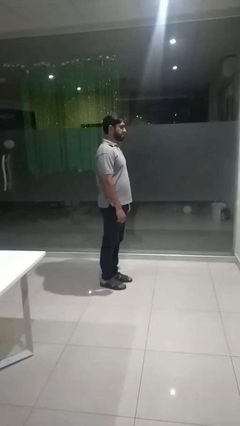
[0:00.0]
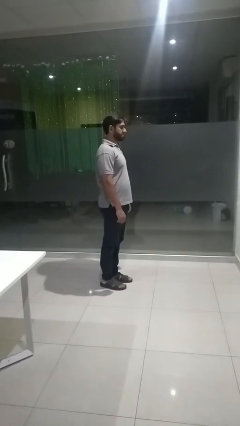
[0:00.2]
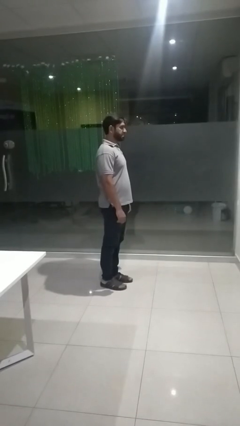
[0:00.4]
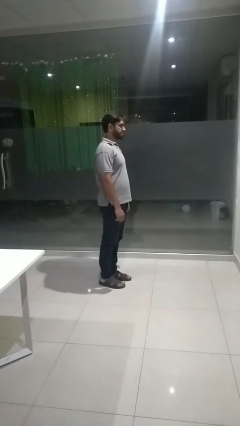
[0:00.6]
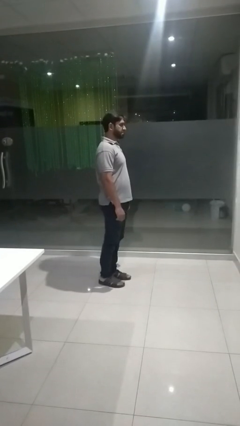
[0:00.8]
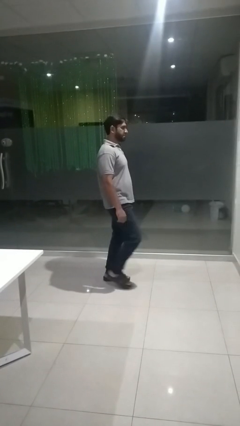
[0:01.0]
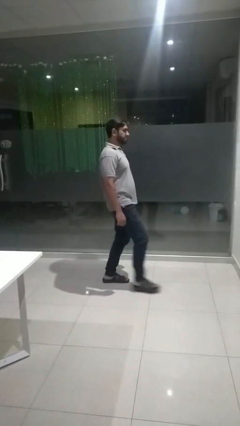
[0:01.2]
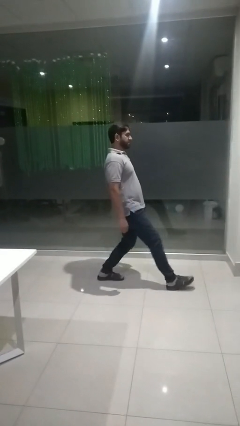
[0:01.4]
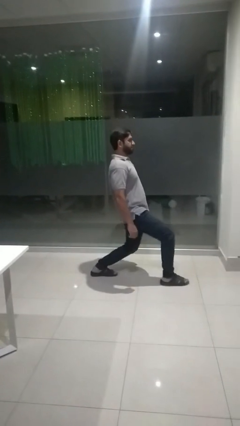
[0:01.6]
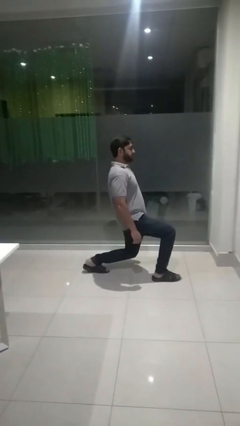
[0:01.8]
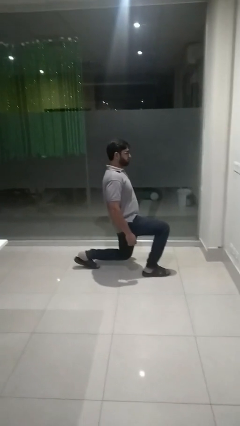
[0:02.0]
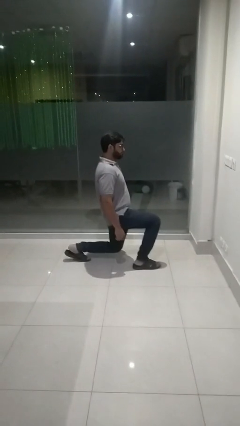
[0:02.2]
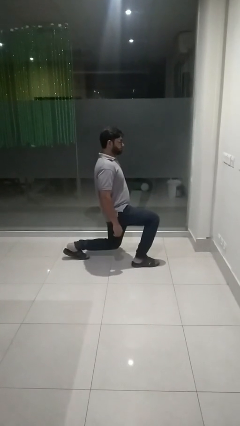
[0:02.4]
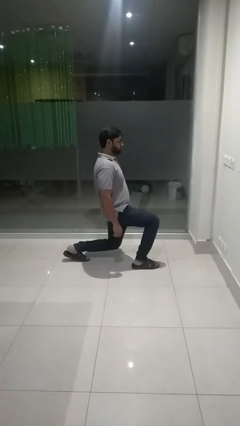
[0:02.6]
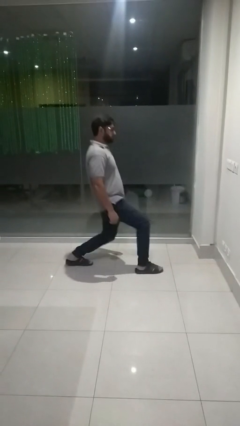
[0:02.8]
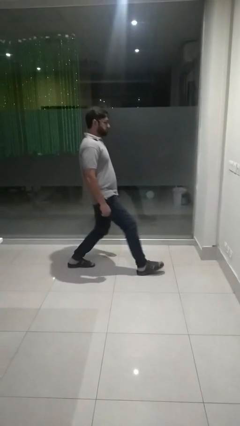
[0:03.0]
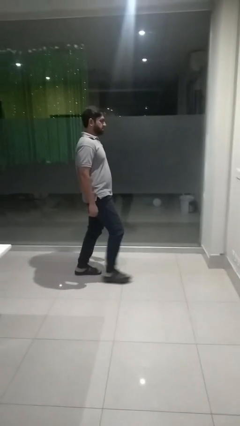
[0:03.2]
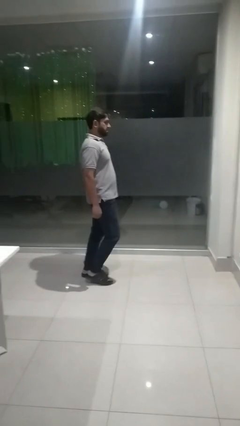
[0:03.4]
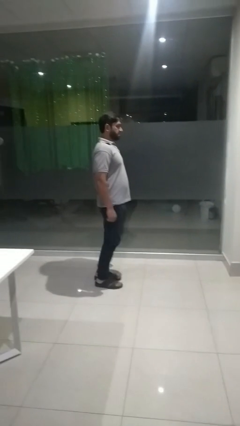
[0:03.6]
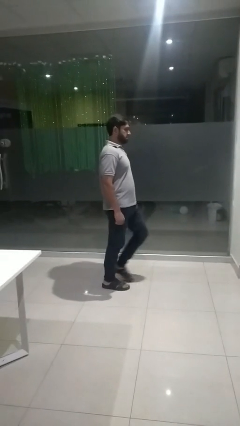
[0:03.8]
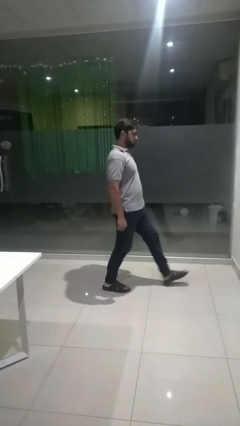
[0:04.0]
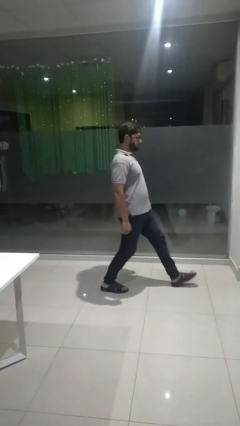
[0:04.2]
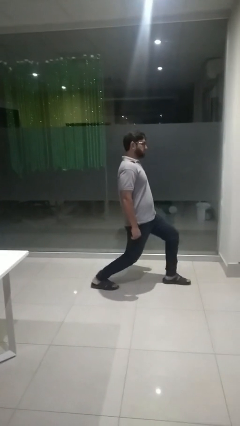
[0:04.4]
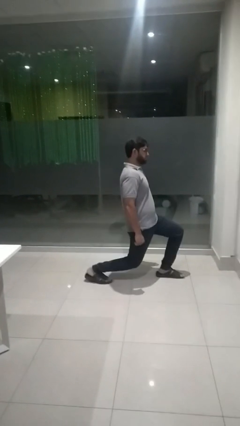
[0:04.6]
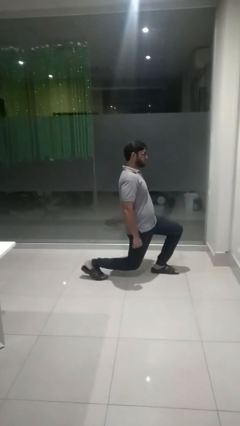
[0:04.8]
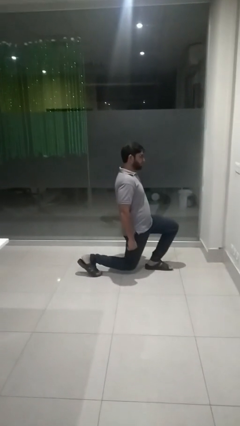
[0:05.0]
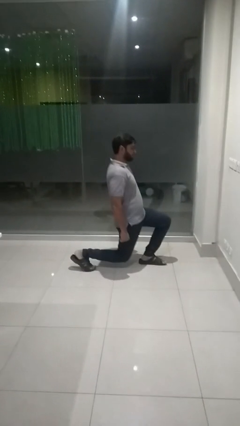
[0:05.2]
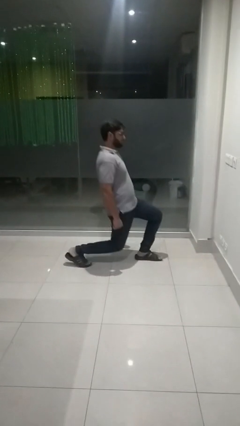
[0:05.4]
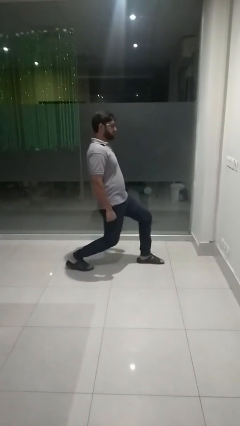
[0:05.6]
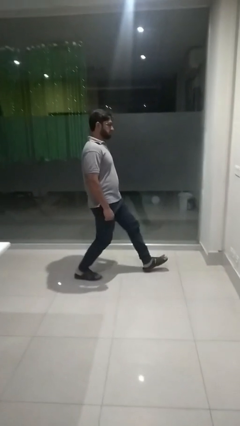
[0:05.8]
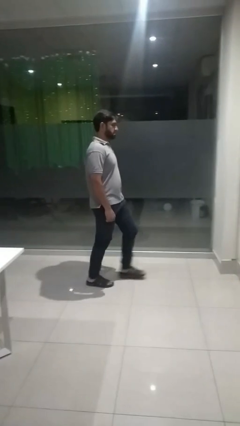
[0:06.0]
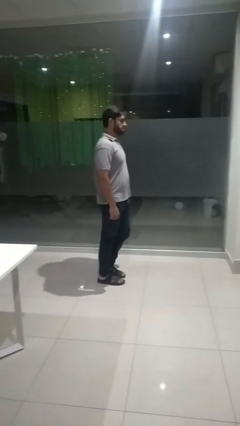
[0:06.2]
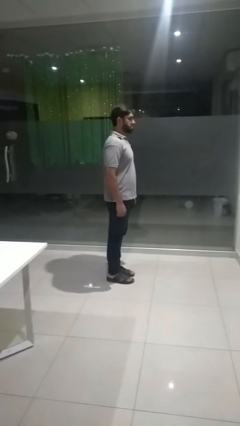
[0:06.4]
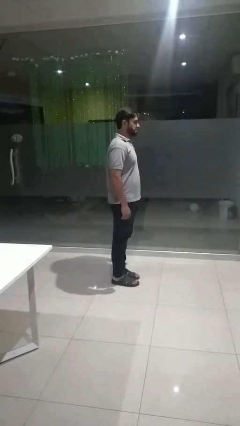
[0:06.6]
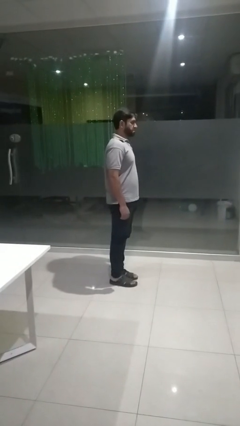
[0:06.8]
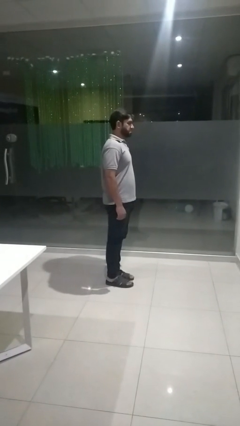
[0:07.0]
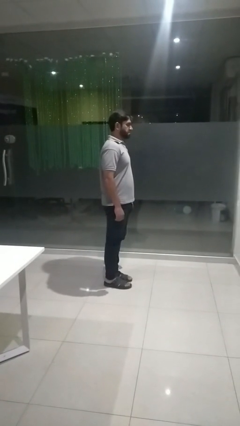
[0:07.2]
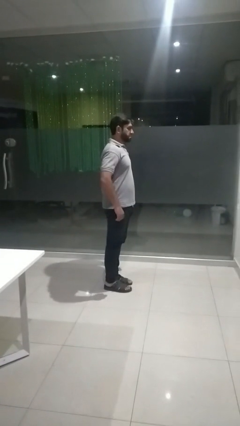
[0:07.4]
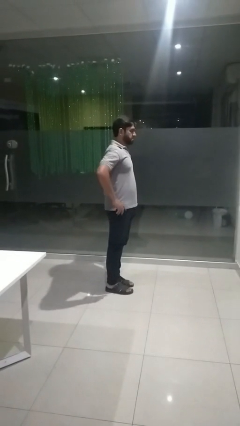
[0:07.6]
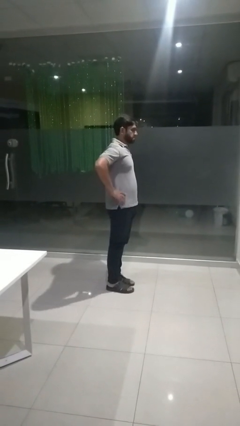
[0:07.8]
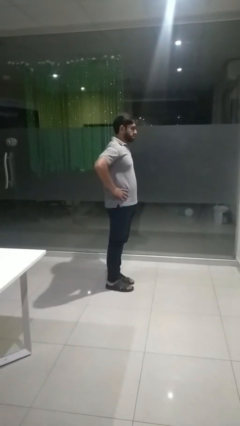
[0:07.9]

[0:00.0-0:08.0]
person exercises with lunges

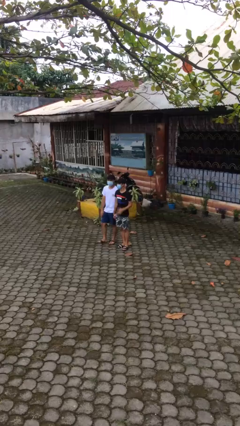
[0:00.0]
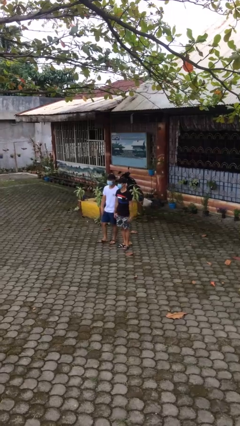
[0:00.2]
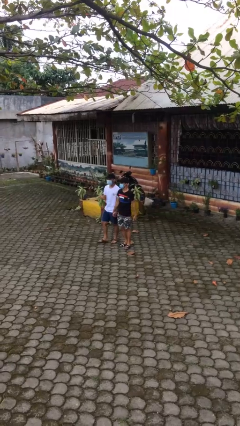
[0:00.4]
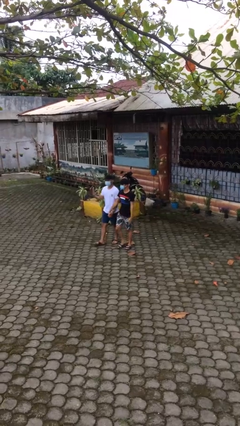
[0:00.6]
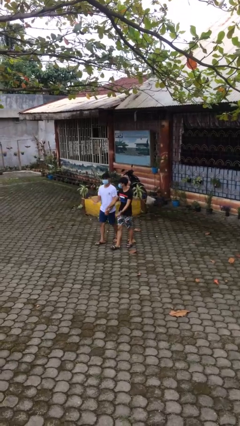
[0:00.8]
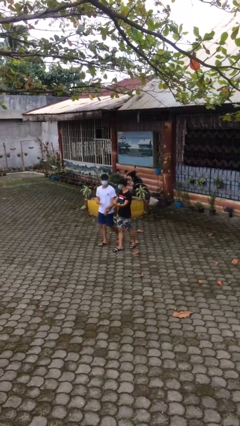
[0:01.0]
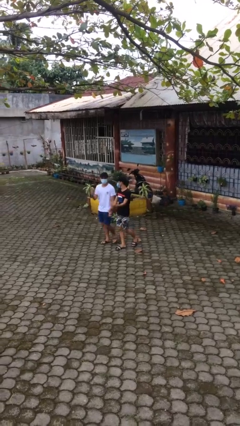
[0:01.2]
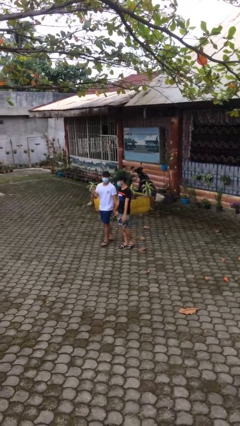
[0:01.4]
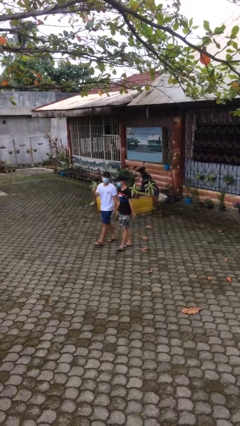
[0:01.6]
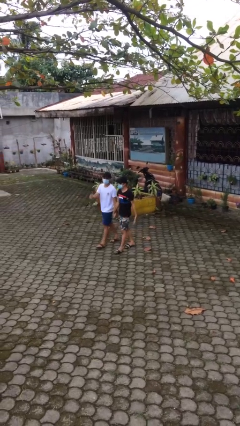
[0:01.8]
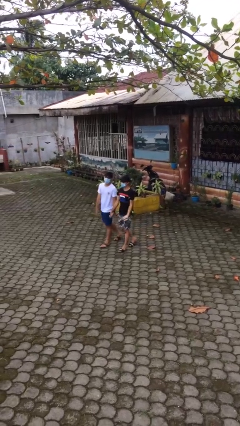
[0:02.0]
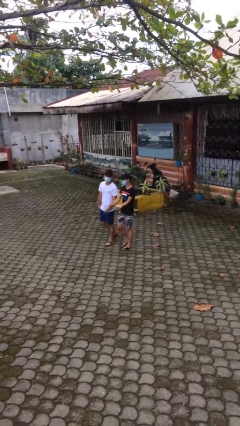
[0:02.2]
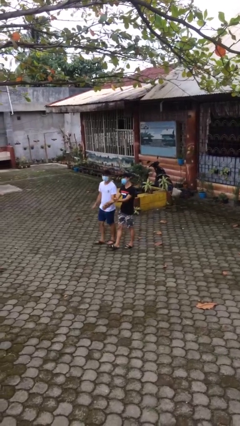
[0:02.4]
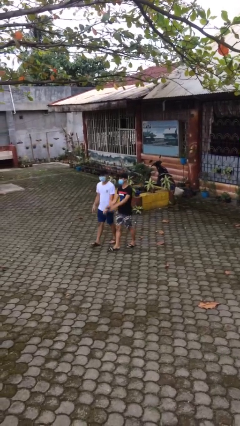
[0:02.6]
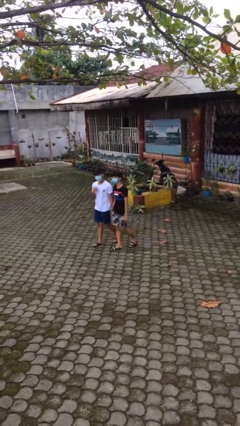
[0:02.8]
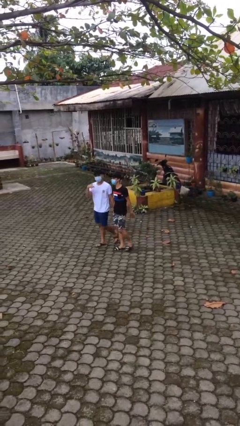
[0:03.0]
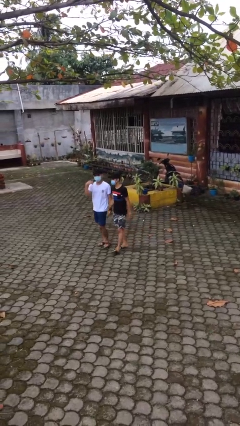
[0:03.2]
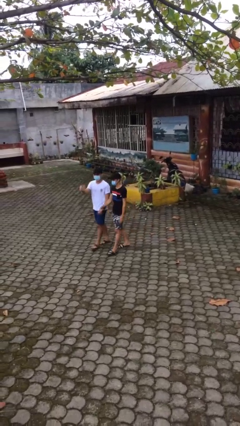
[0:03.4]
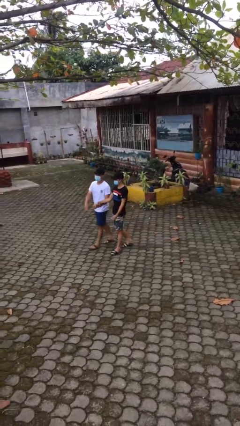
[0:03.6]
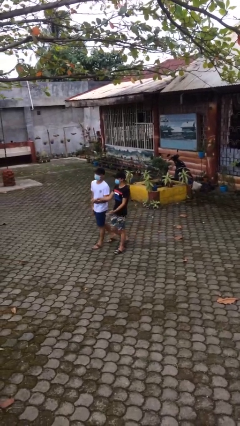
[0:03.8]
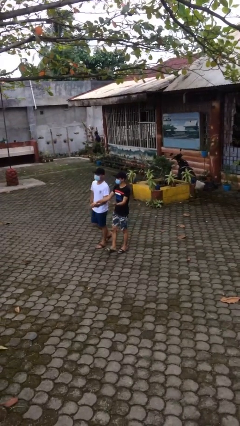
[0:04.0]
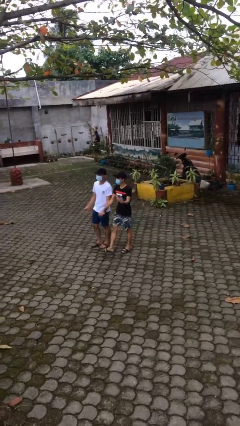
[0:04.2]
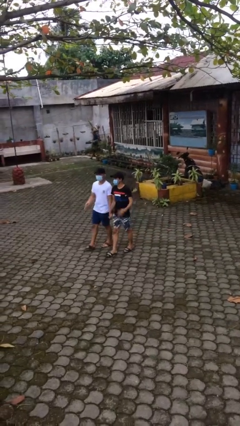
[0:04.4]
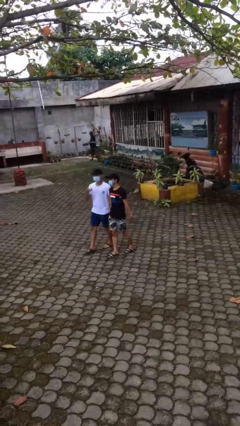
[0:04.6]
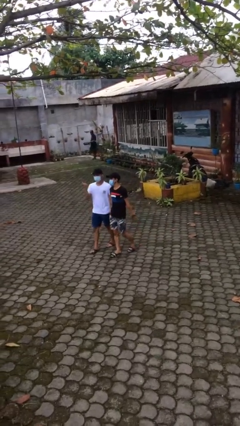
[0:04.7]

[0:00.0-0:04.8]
person holds hand

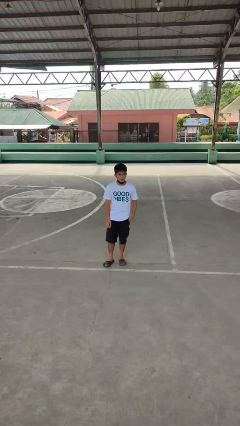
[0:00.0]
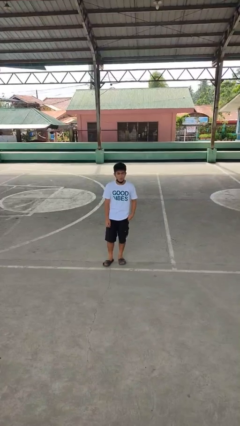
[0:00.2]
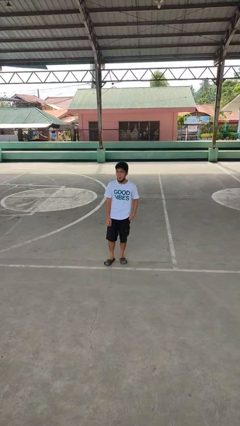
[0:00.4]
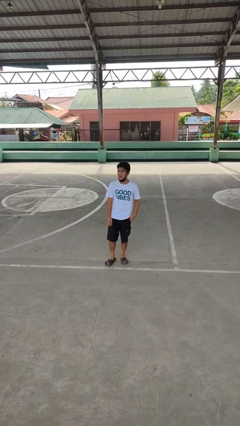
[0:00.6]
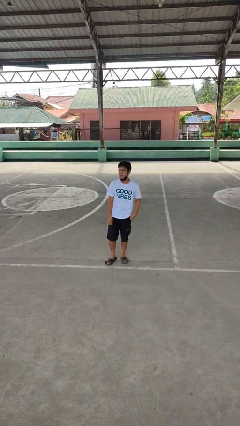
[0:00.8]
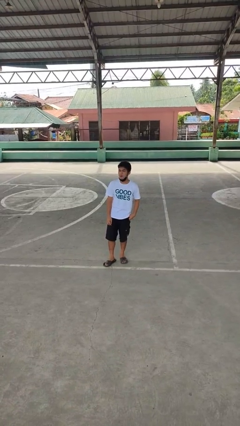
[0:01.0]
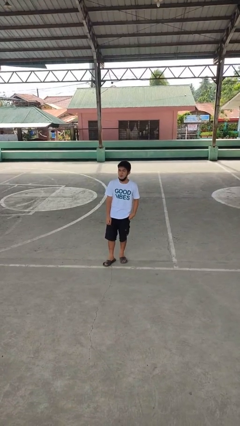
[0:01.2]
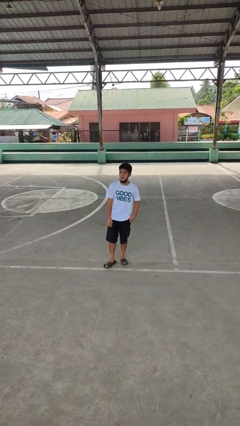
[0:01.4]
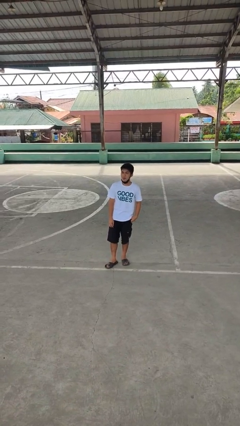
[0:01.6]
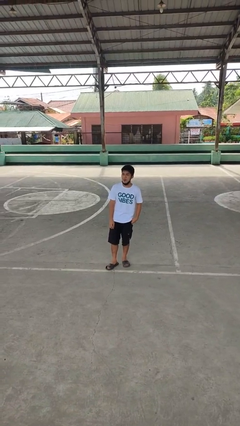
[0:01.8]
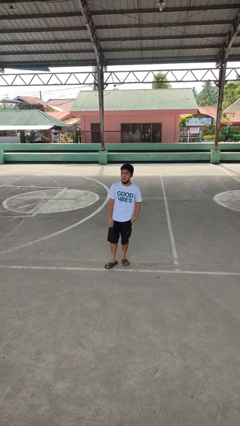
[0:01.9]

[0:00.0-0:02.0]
person sticks out tongue

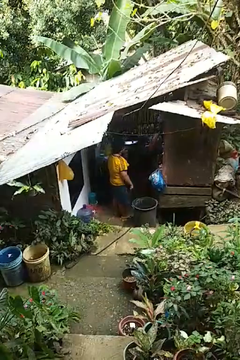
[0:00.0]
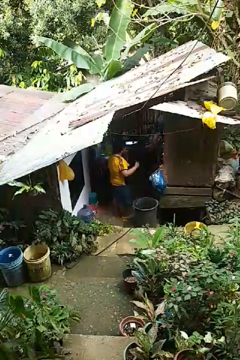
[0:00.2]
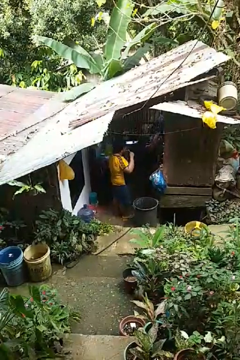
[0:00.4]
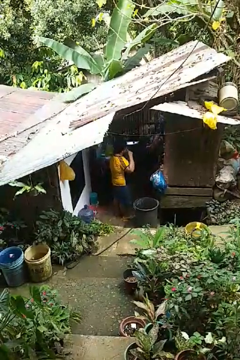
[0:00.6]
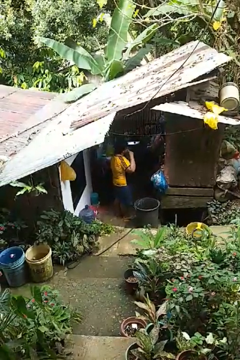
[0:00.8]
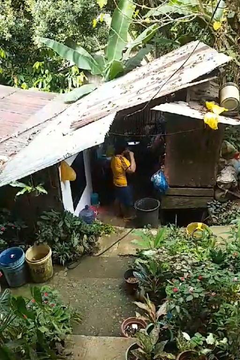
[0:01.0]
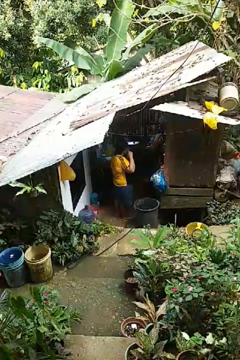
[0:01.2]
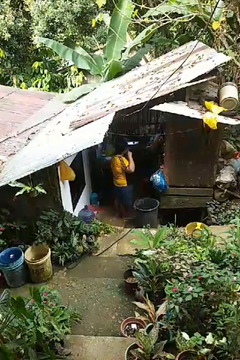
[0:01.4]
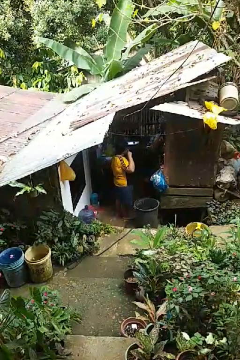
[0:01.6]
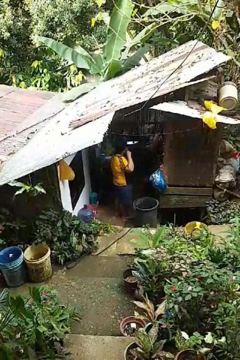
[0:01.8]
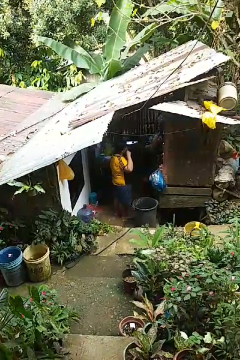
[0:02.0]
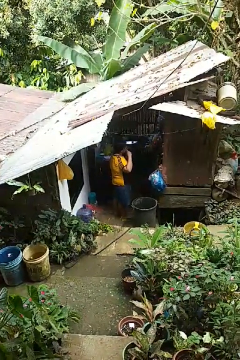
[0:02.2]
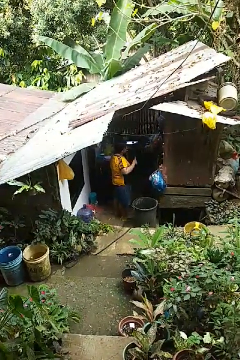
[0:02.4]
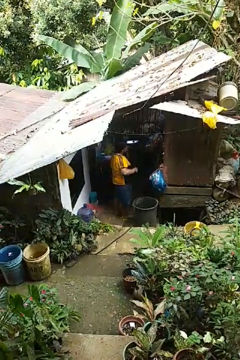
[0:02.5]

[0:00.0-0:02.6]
person brushes teeth

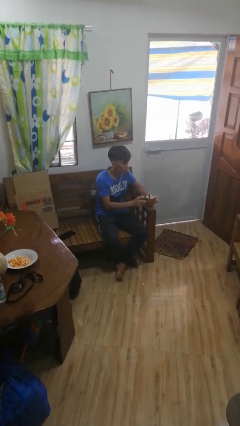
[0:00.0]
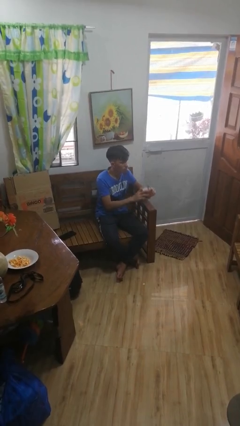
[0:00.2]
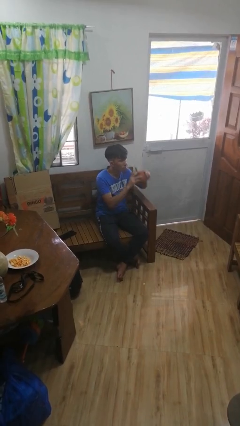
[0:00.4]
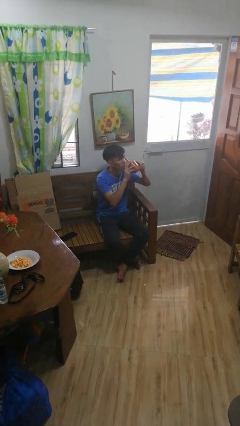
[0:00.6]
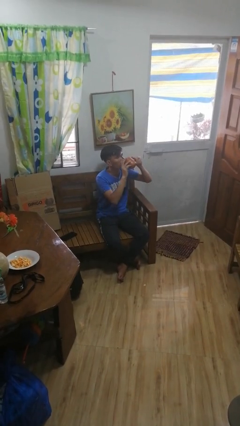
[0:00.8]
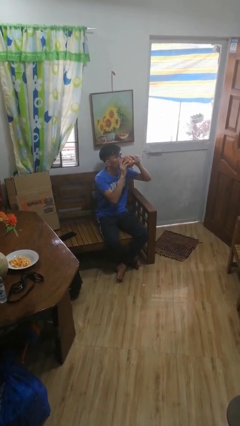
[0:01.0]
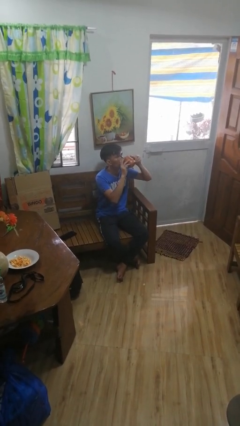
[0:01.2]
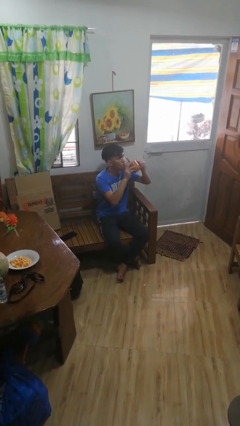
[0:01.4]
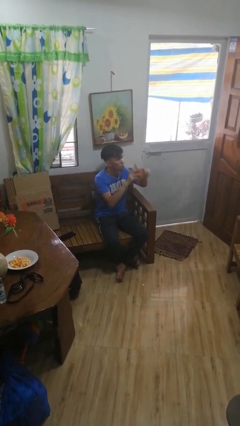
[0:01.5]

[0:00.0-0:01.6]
person drinks from mug
